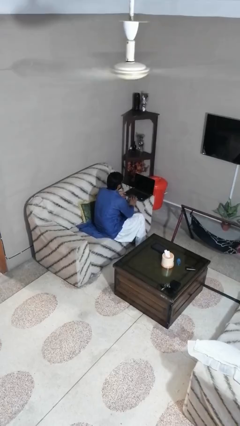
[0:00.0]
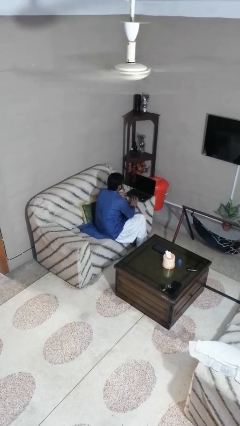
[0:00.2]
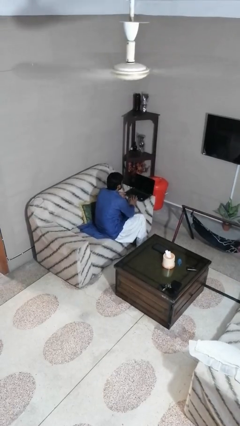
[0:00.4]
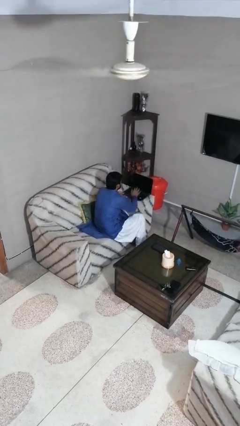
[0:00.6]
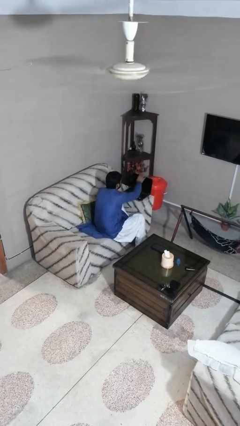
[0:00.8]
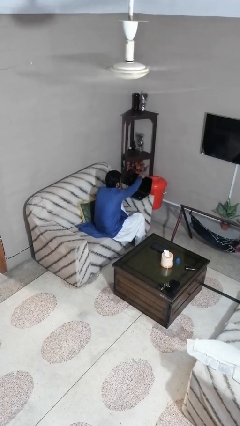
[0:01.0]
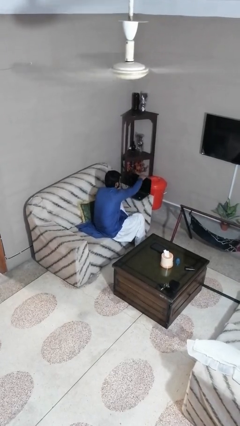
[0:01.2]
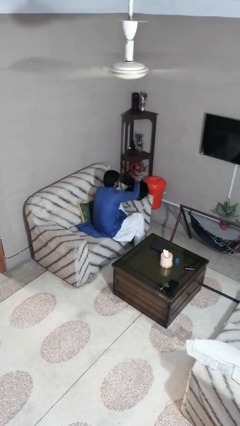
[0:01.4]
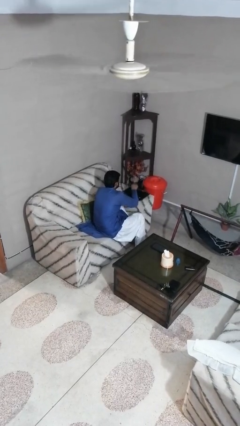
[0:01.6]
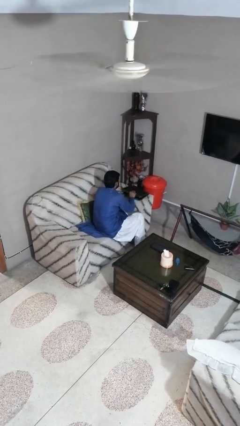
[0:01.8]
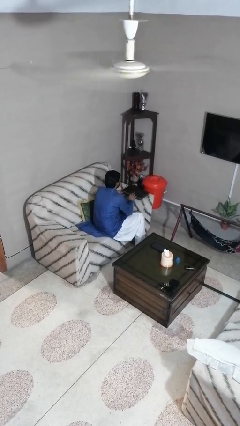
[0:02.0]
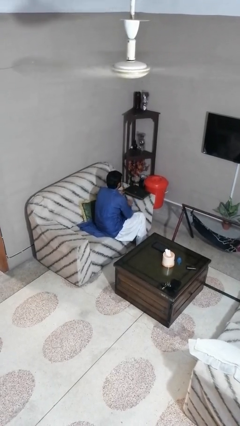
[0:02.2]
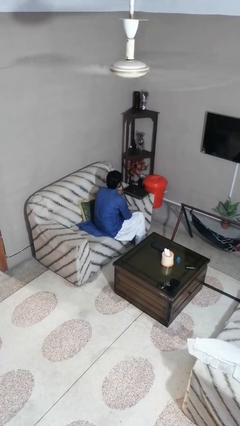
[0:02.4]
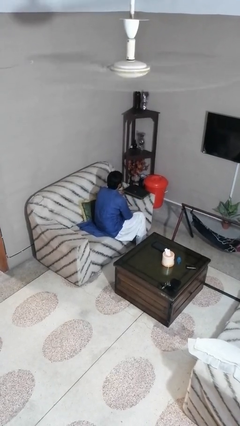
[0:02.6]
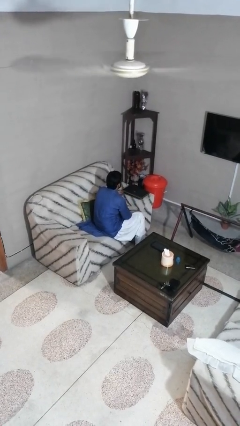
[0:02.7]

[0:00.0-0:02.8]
person closes laptop

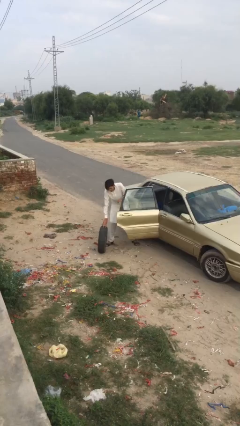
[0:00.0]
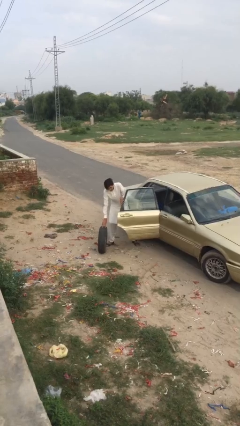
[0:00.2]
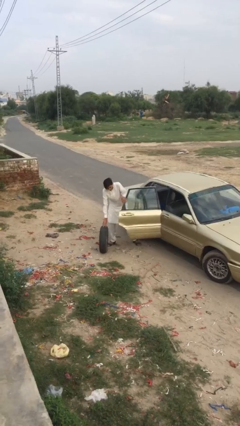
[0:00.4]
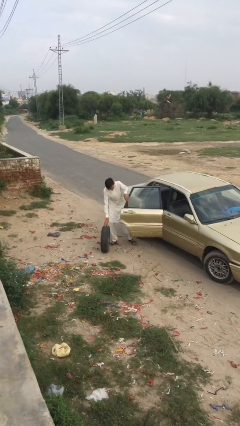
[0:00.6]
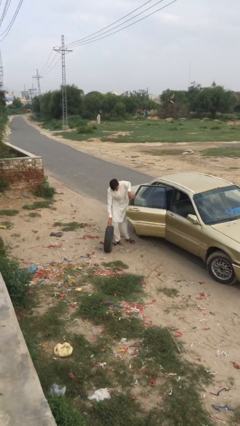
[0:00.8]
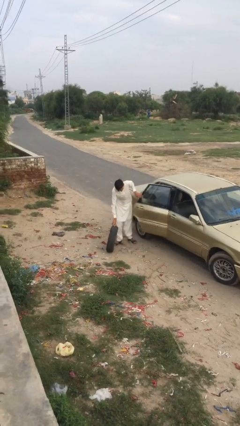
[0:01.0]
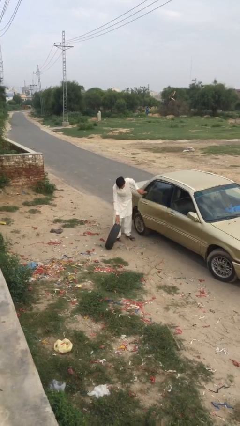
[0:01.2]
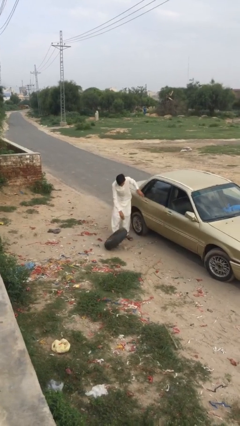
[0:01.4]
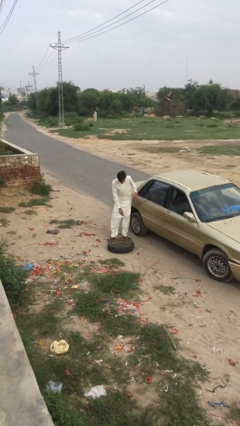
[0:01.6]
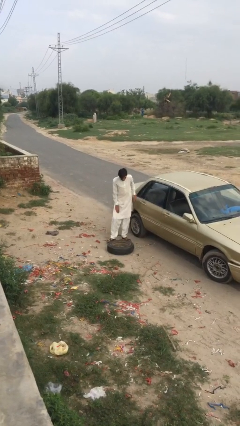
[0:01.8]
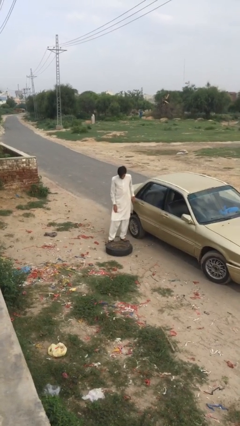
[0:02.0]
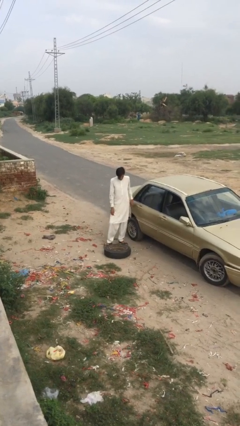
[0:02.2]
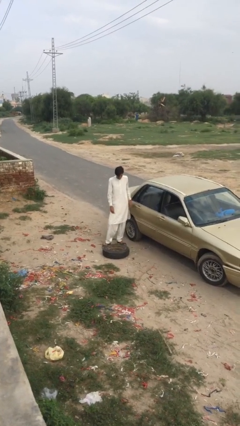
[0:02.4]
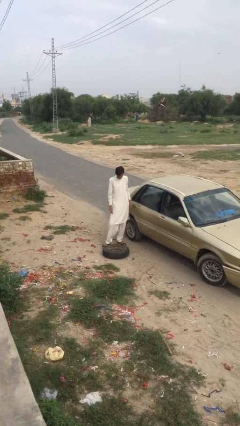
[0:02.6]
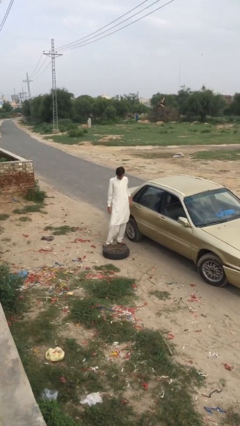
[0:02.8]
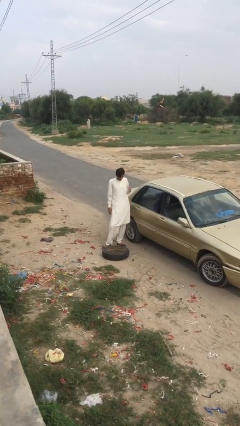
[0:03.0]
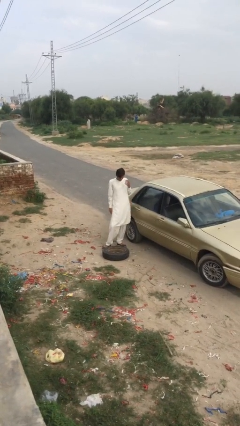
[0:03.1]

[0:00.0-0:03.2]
person closes car door

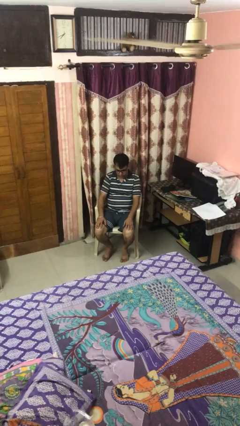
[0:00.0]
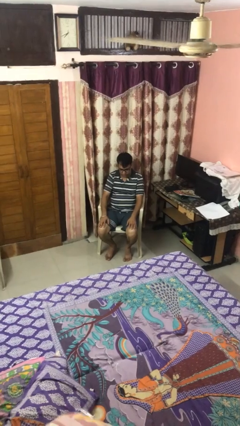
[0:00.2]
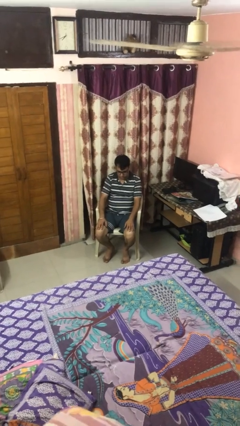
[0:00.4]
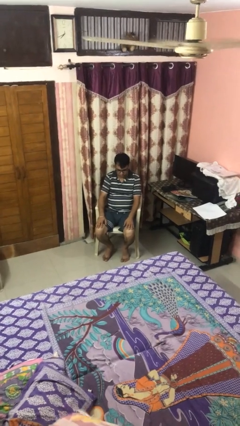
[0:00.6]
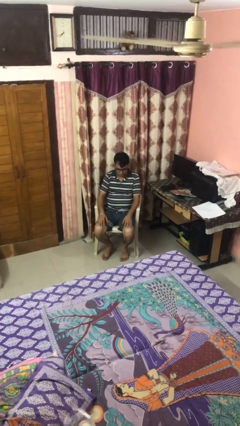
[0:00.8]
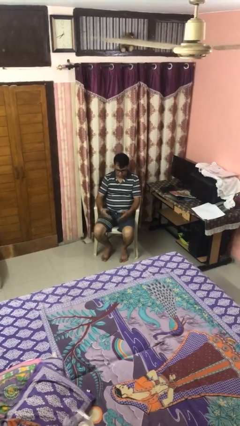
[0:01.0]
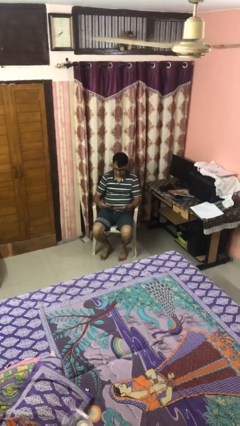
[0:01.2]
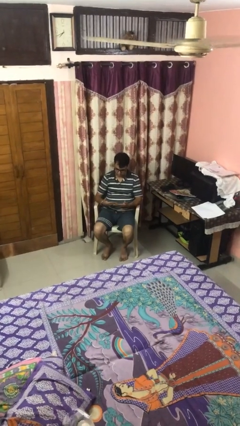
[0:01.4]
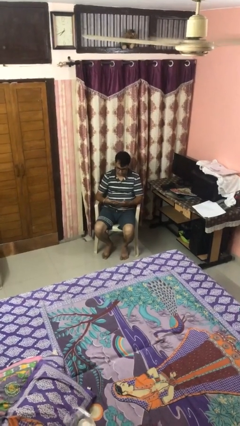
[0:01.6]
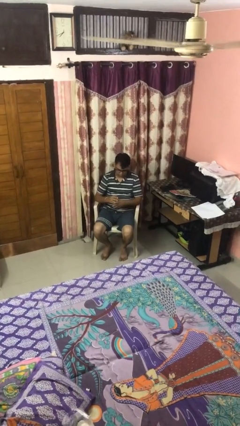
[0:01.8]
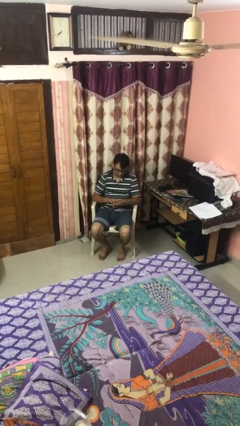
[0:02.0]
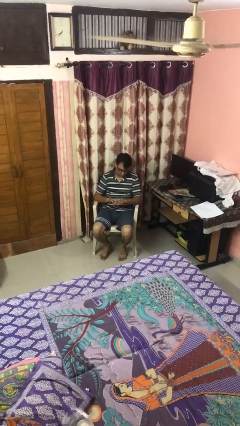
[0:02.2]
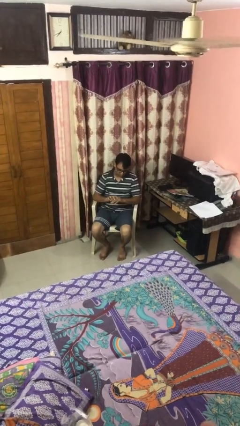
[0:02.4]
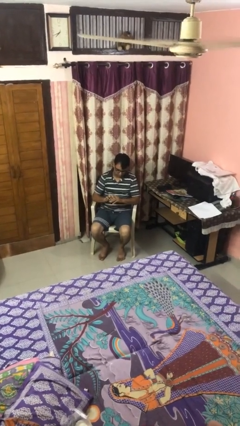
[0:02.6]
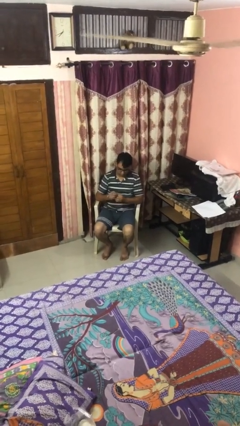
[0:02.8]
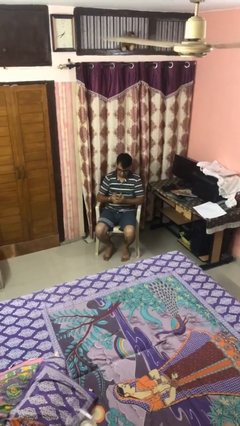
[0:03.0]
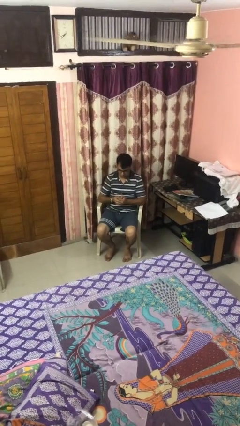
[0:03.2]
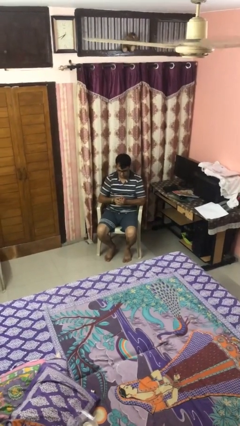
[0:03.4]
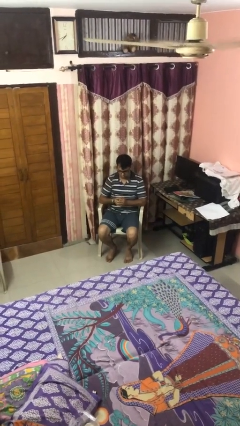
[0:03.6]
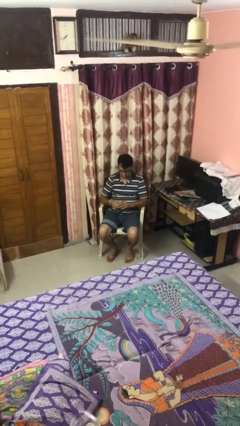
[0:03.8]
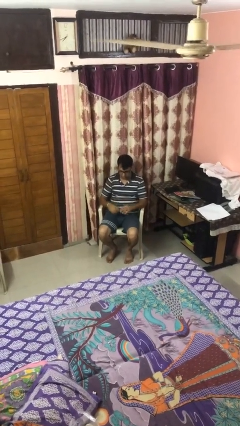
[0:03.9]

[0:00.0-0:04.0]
person looks at hands in lap

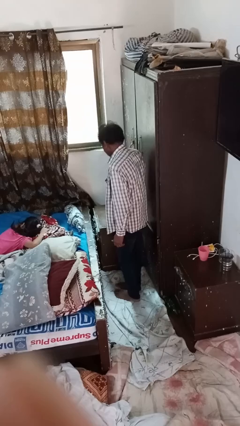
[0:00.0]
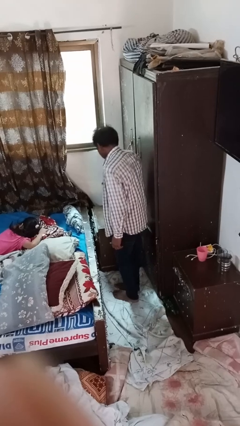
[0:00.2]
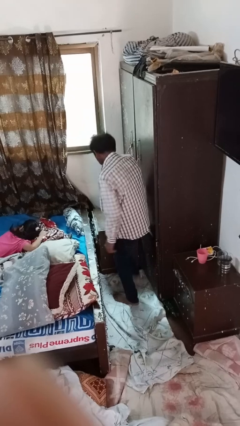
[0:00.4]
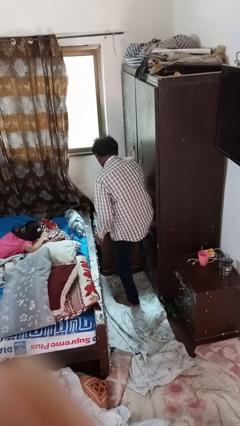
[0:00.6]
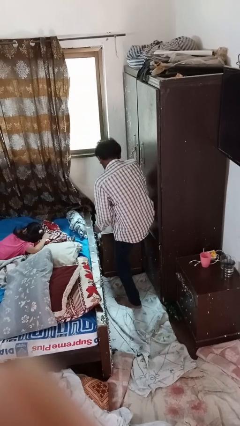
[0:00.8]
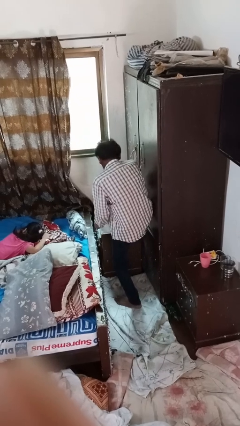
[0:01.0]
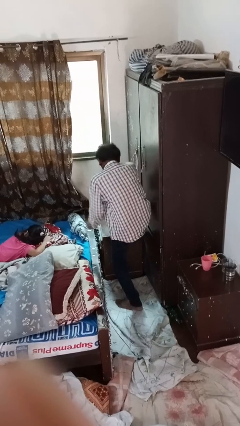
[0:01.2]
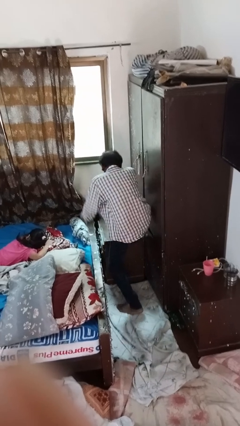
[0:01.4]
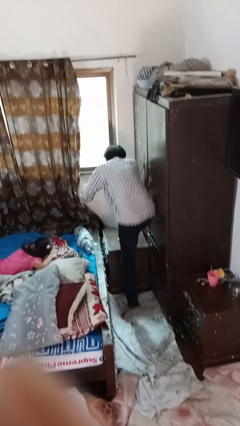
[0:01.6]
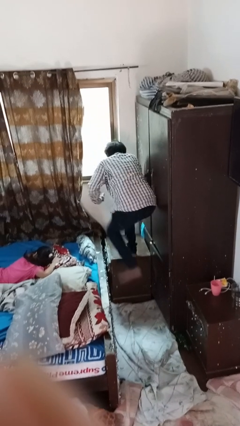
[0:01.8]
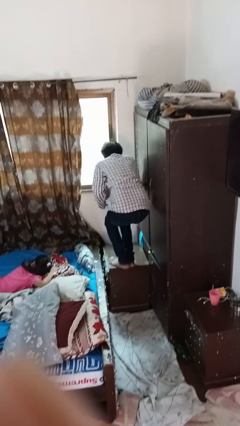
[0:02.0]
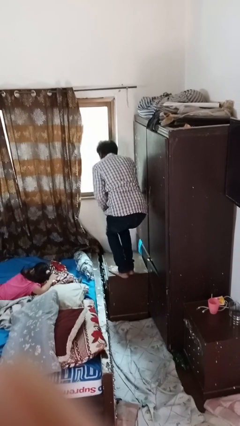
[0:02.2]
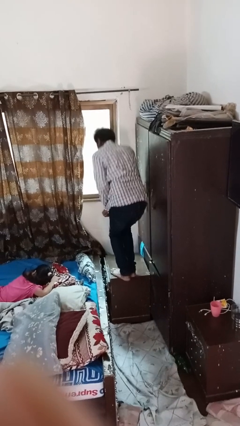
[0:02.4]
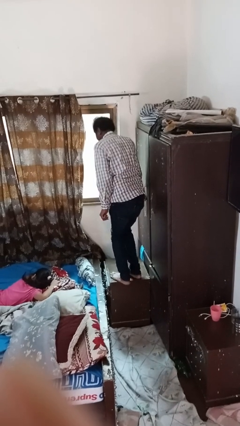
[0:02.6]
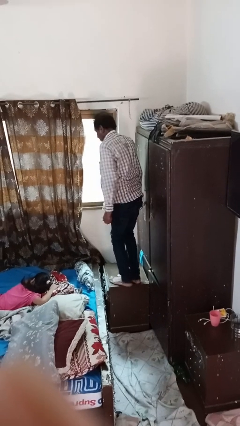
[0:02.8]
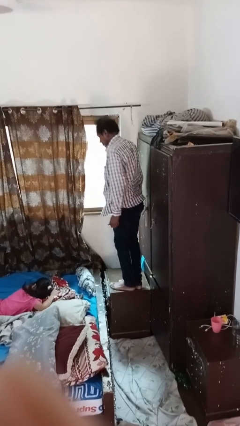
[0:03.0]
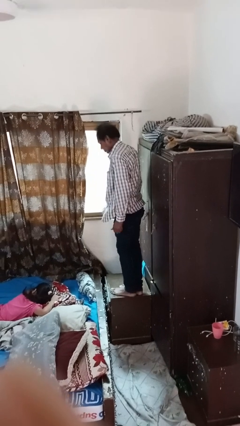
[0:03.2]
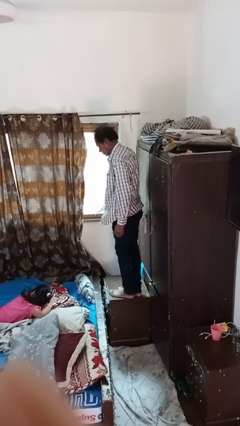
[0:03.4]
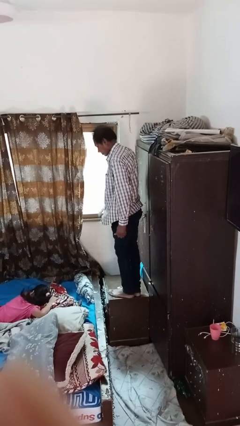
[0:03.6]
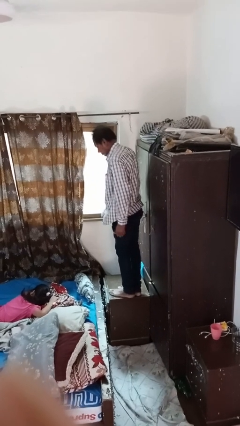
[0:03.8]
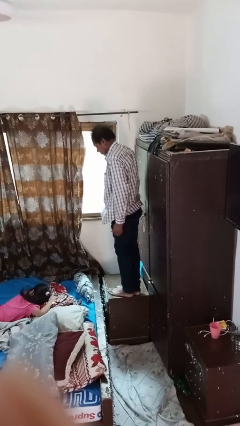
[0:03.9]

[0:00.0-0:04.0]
person climbs on table

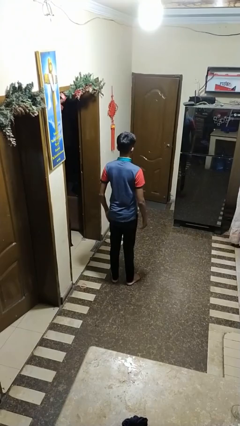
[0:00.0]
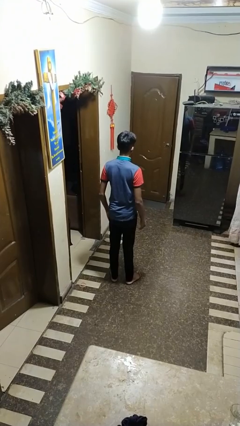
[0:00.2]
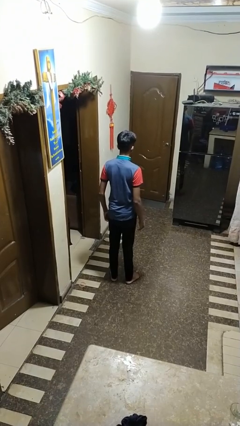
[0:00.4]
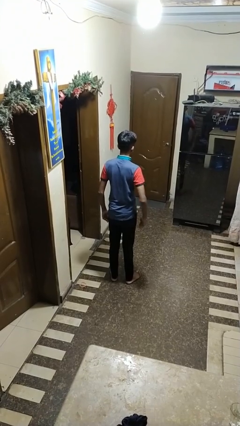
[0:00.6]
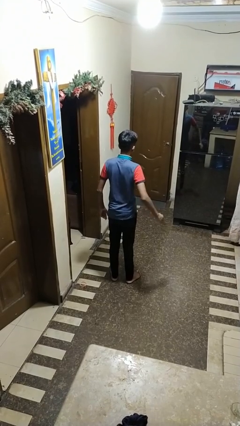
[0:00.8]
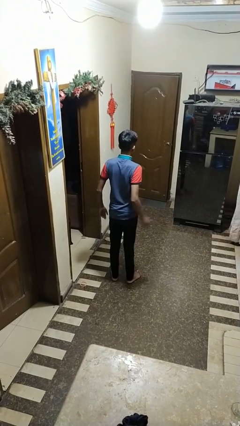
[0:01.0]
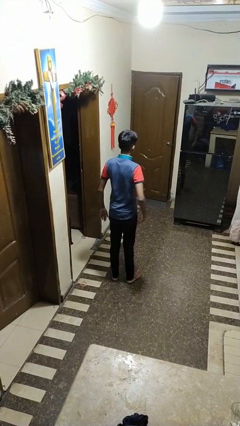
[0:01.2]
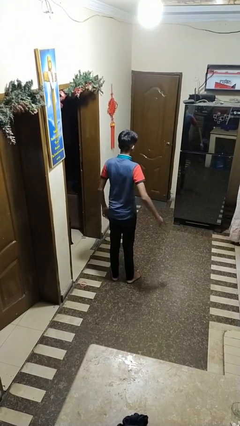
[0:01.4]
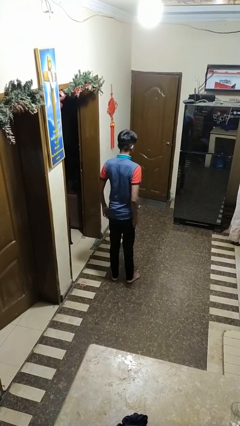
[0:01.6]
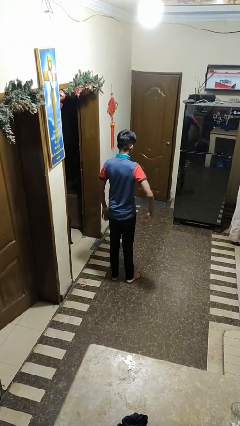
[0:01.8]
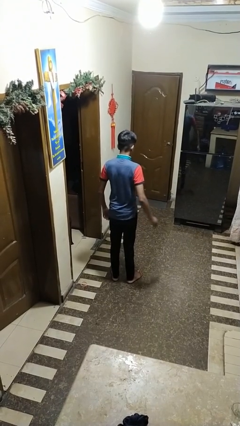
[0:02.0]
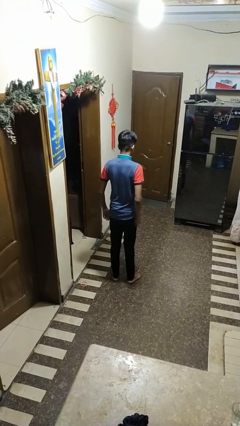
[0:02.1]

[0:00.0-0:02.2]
person slaps hands on thighs

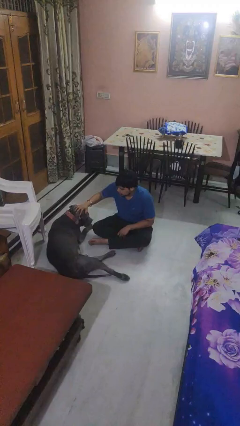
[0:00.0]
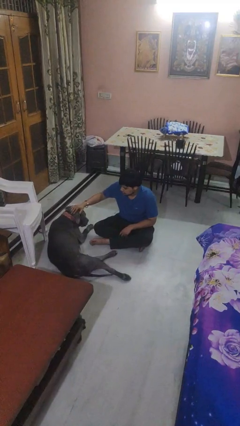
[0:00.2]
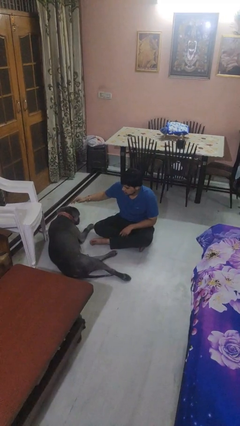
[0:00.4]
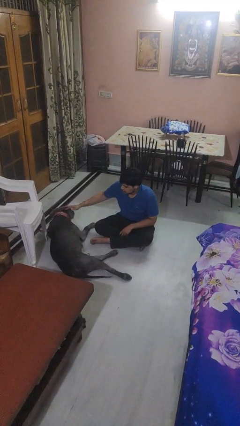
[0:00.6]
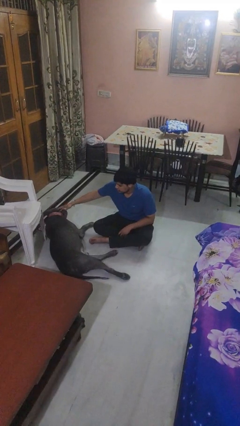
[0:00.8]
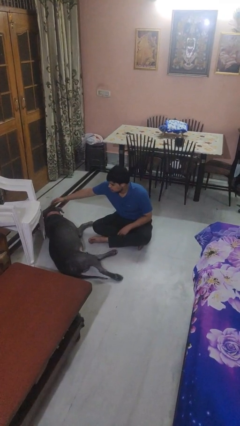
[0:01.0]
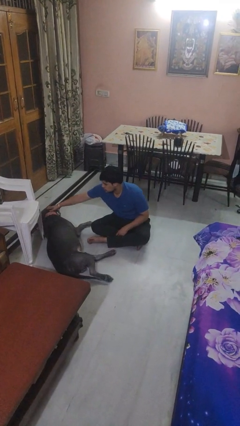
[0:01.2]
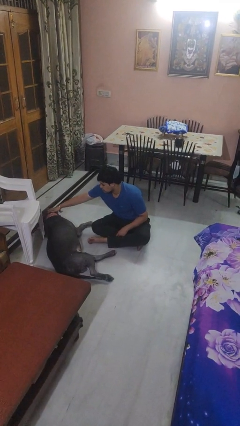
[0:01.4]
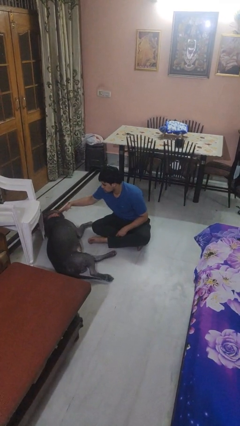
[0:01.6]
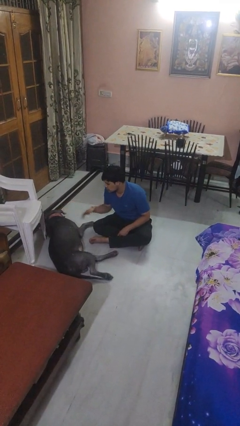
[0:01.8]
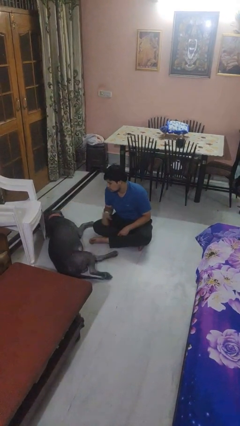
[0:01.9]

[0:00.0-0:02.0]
person pets dog
